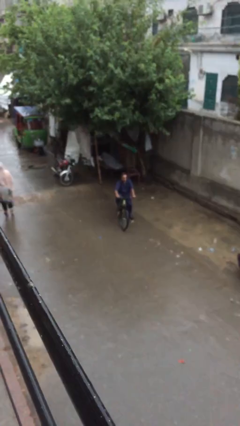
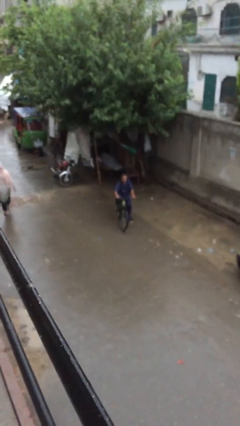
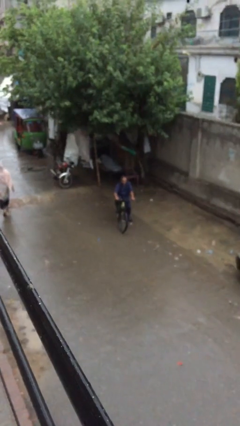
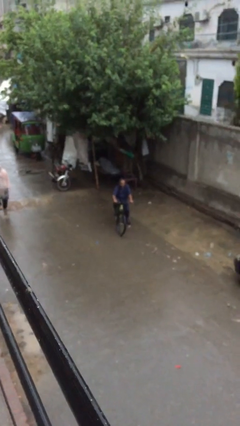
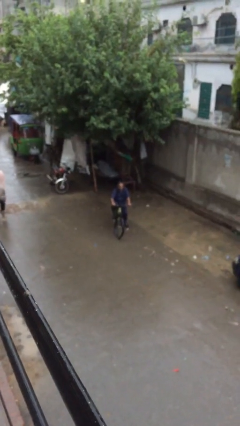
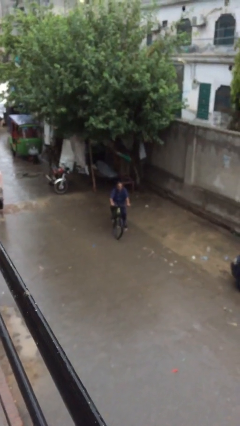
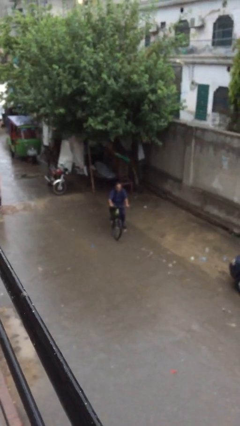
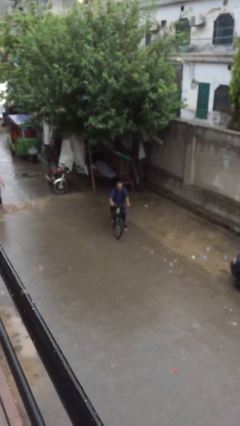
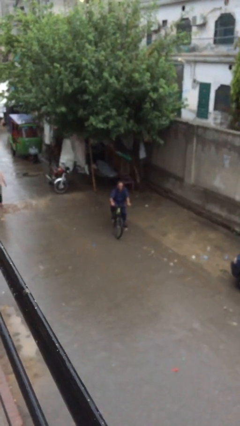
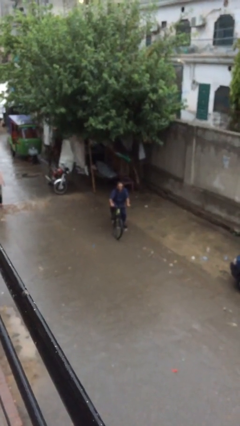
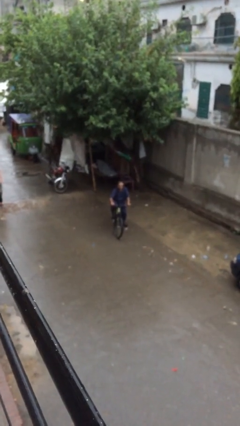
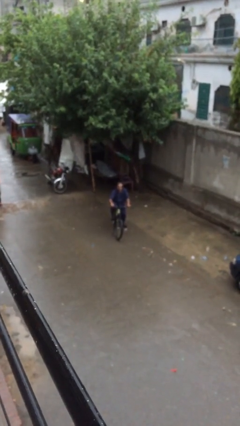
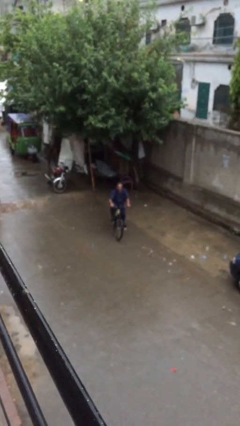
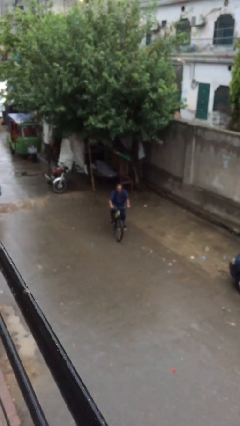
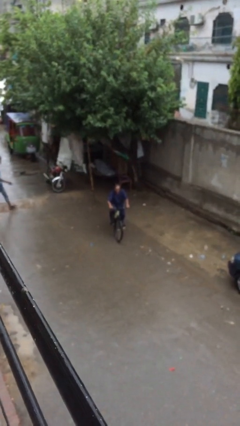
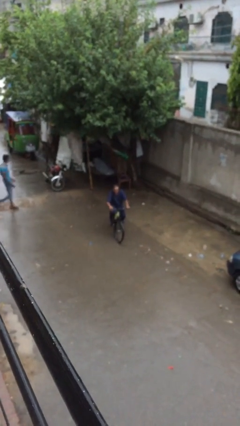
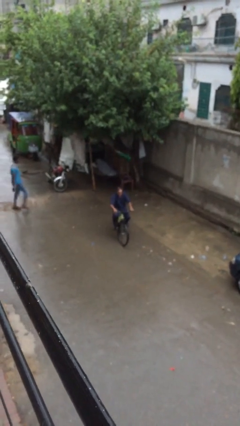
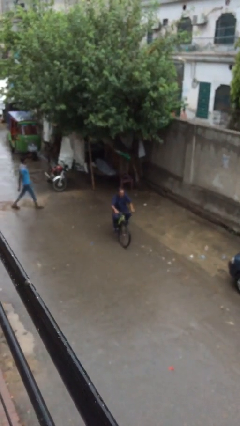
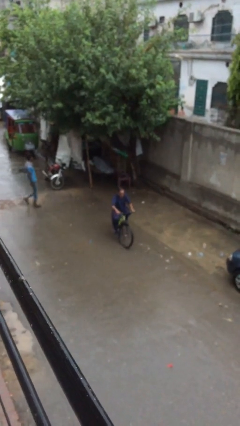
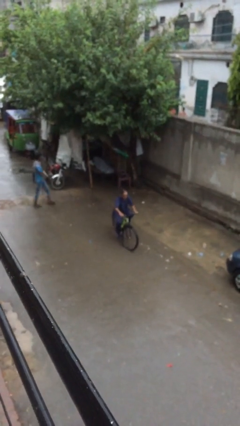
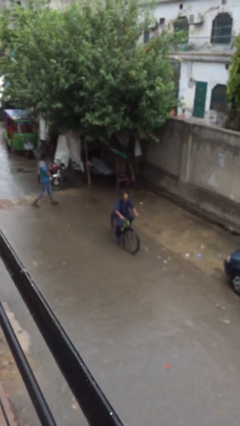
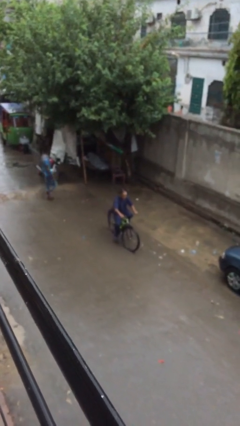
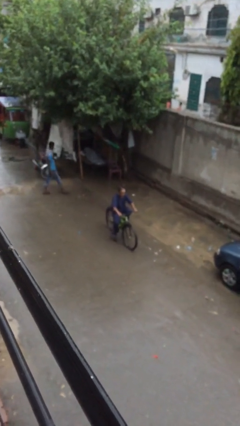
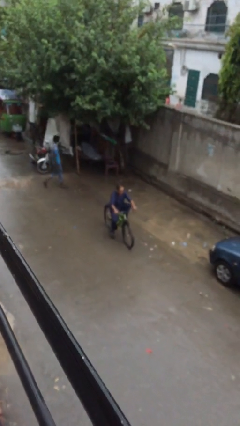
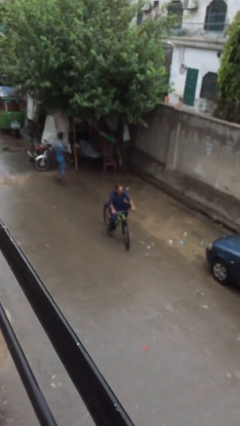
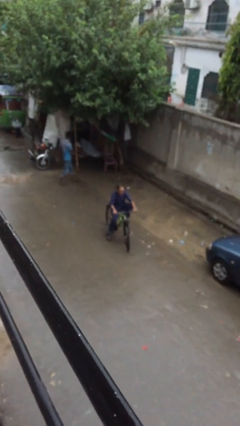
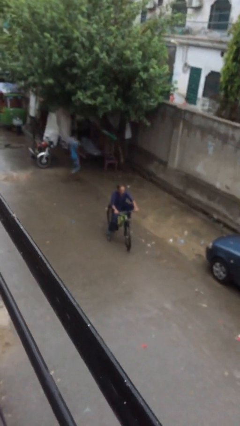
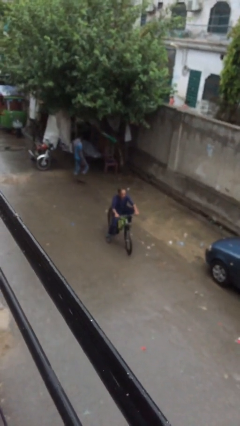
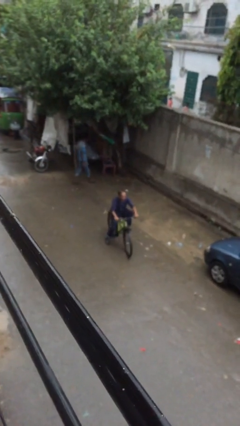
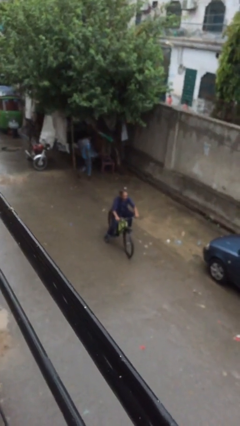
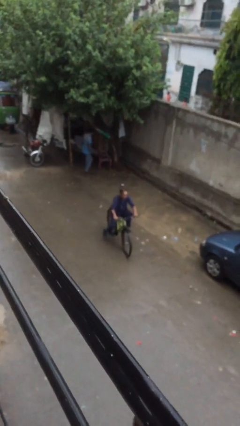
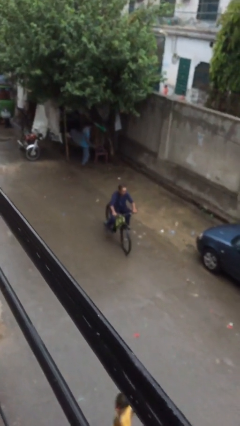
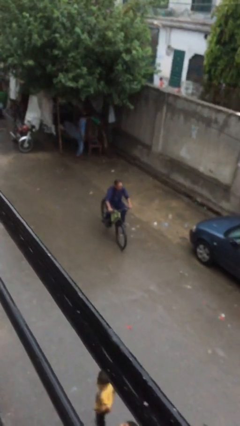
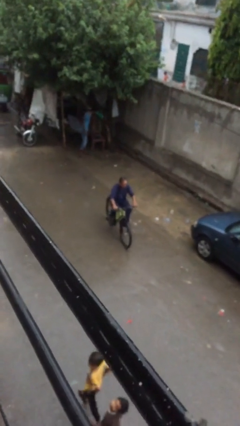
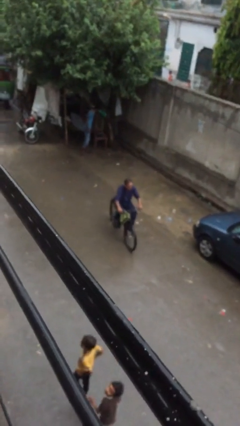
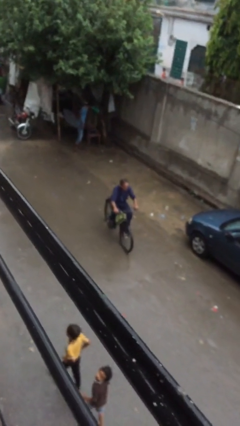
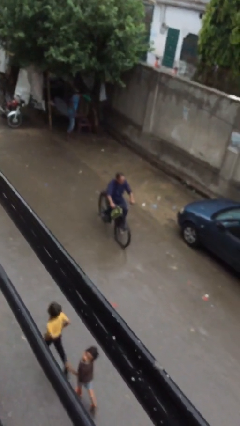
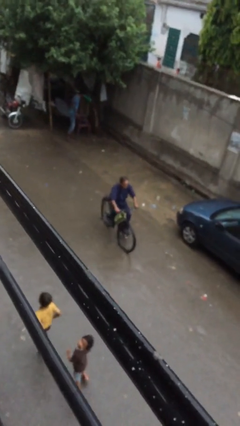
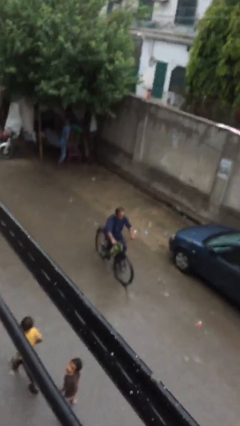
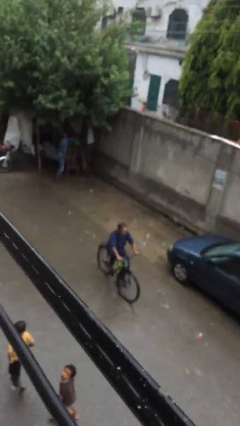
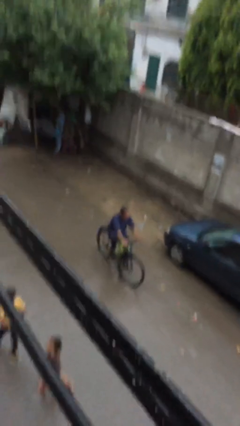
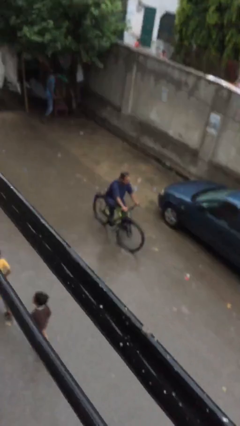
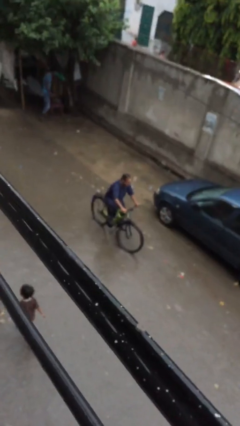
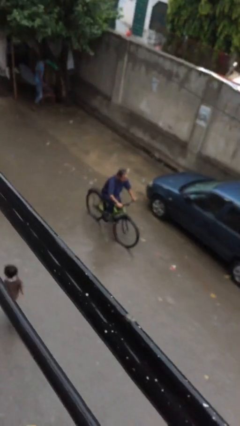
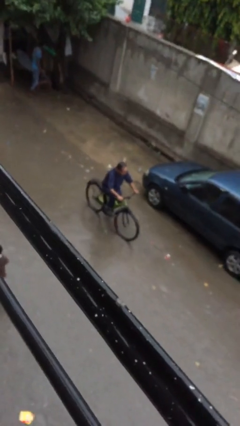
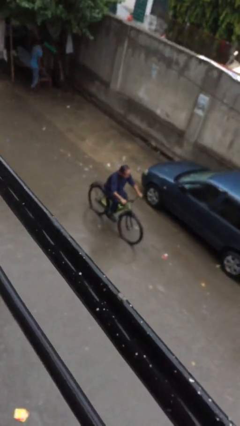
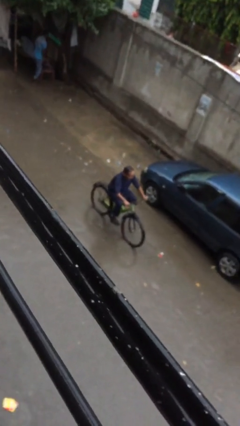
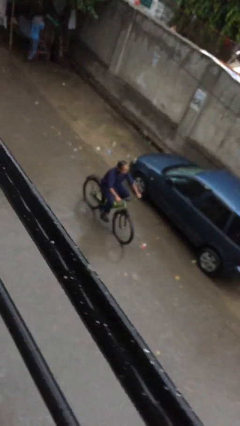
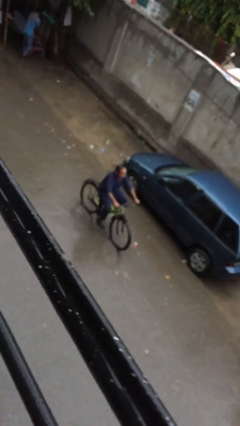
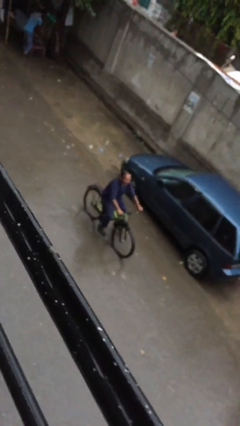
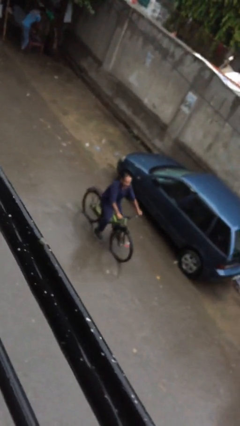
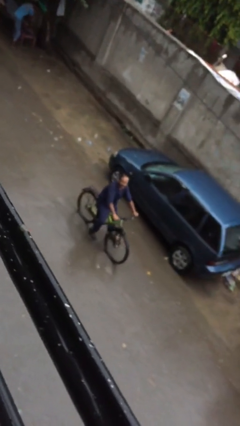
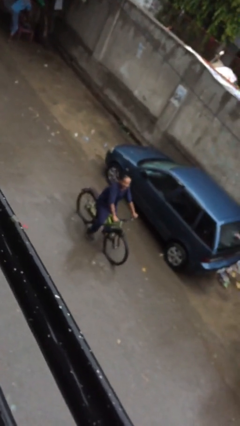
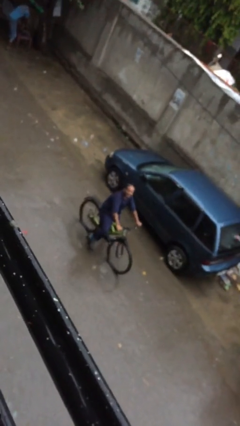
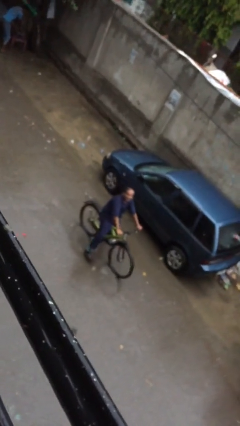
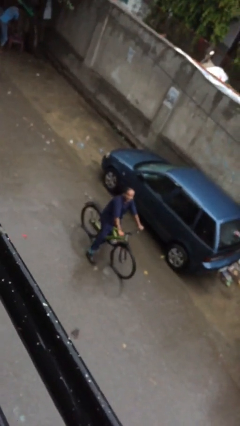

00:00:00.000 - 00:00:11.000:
person rides bicycle

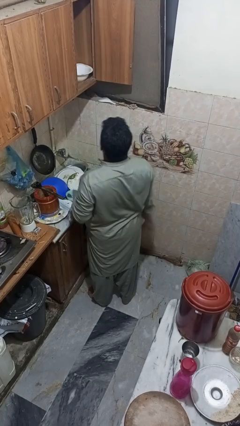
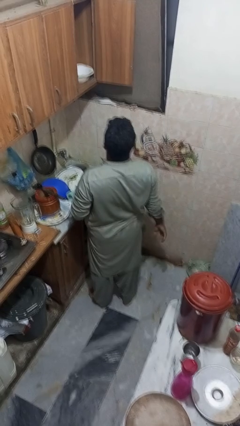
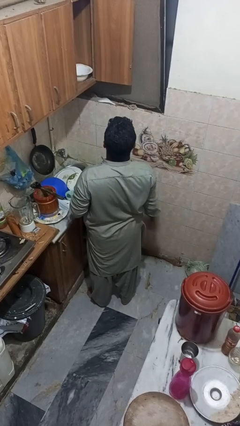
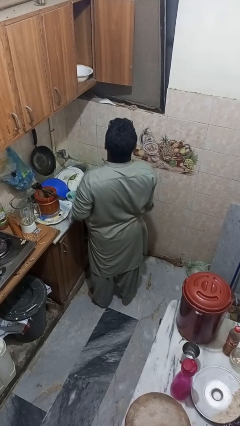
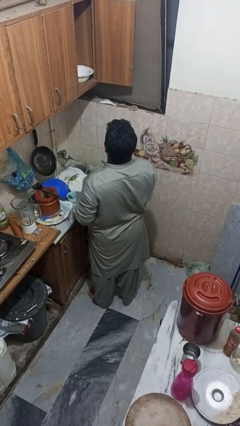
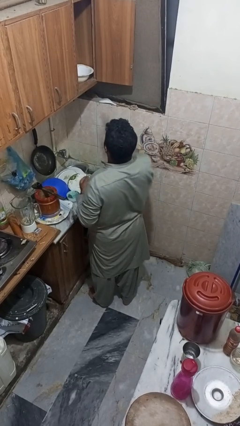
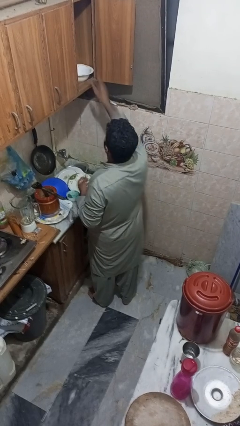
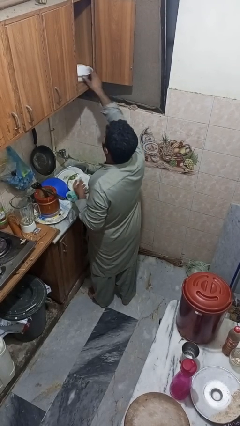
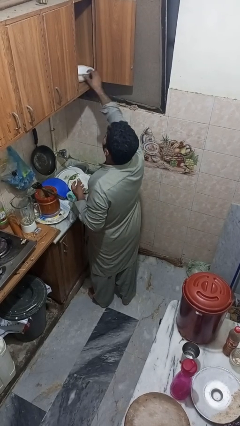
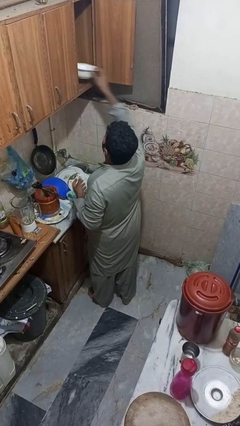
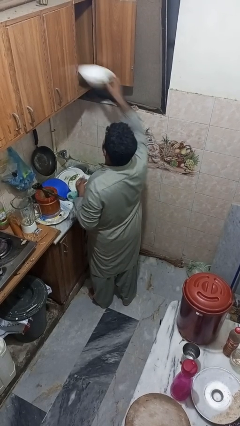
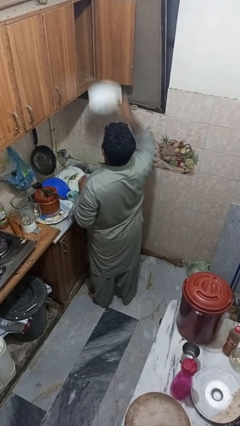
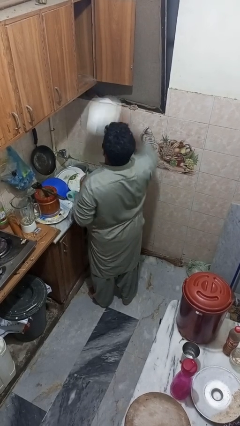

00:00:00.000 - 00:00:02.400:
person takes object from cabinet

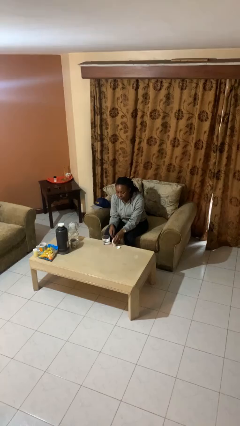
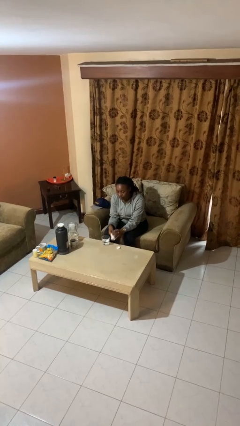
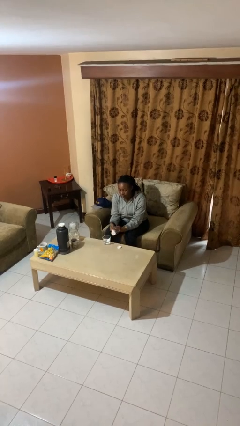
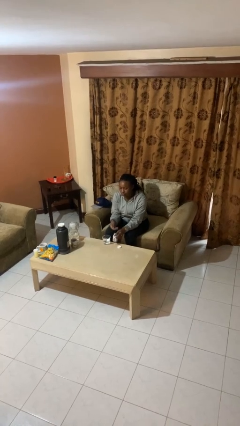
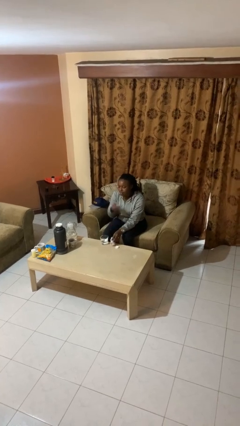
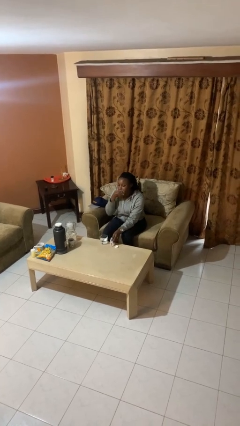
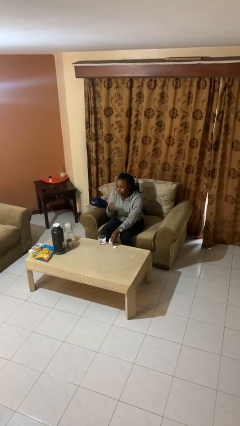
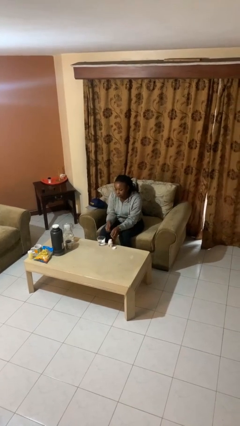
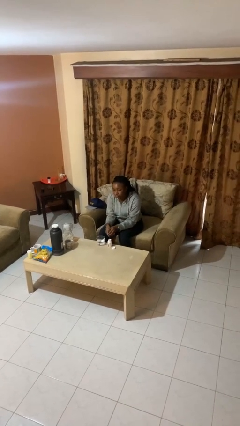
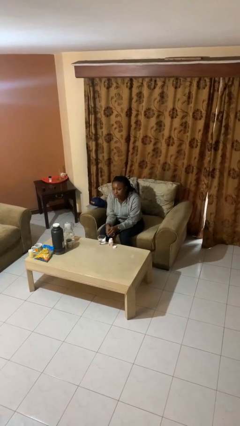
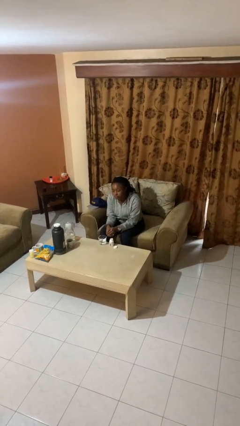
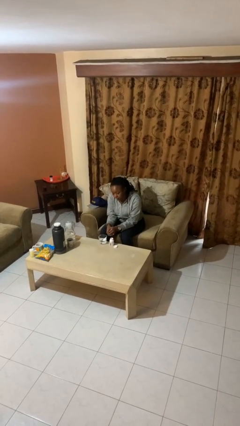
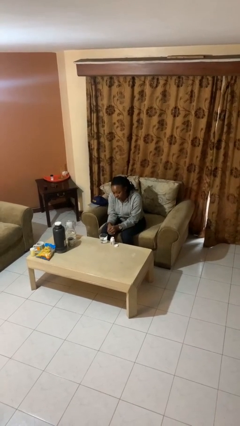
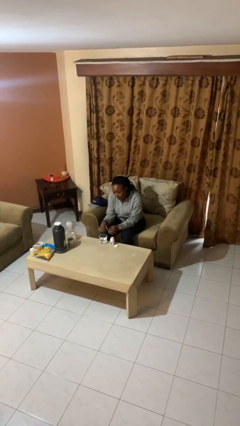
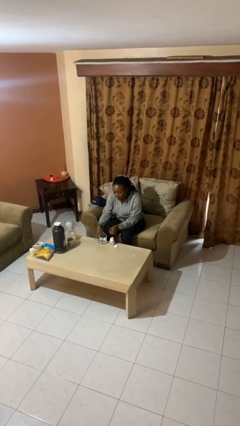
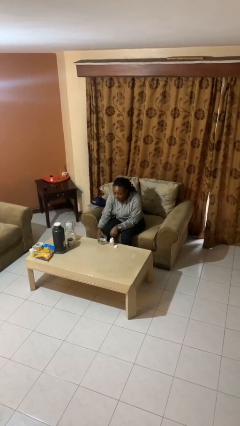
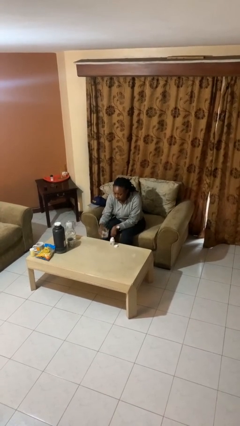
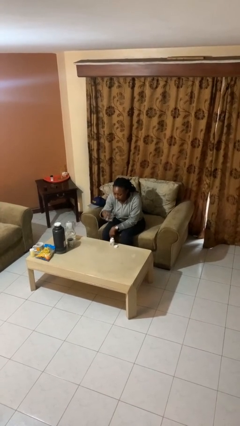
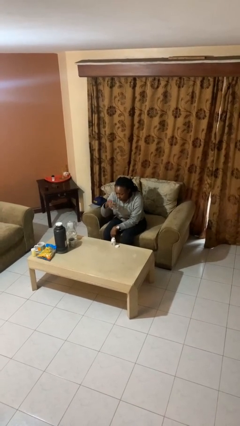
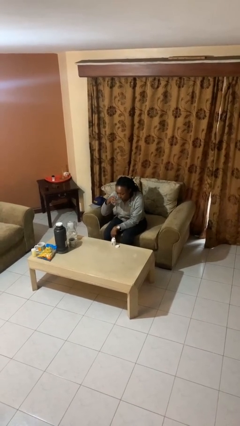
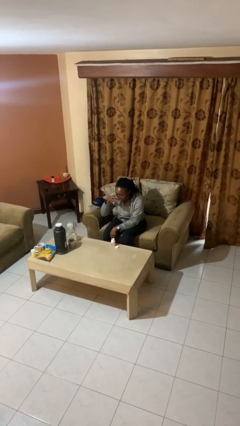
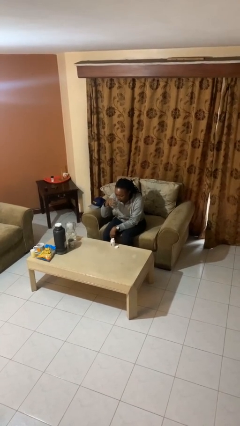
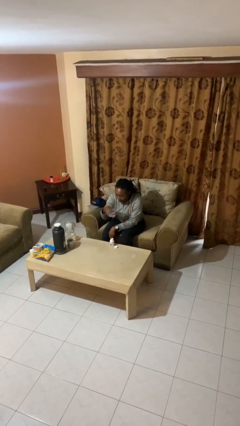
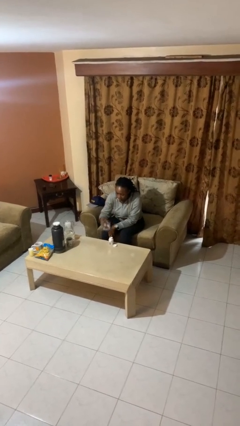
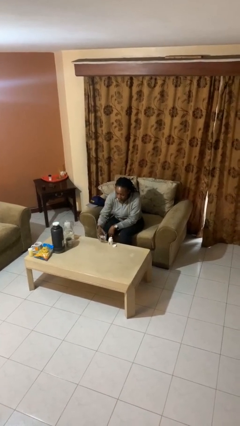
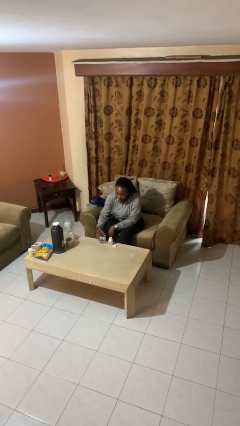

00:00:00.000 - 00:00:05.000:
person takes medicine pills
